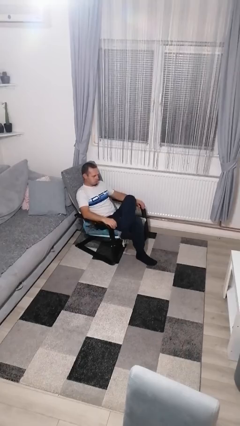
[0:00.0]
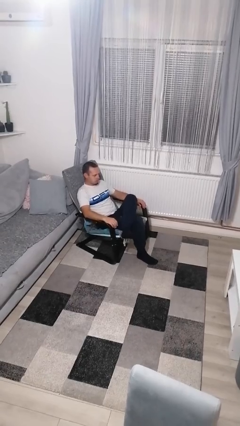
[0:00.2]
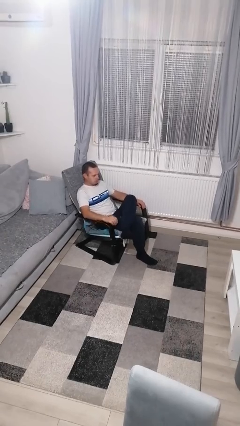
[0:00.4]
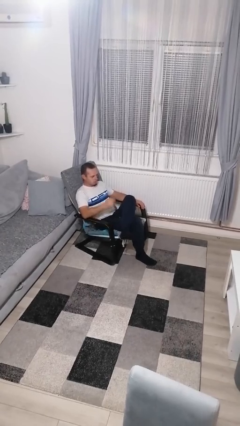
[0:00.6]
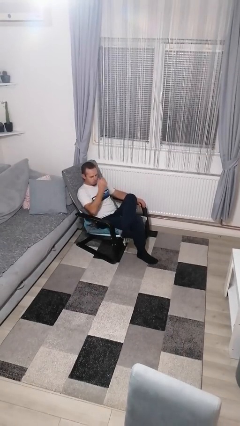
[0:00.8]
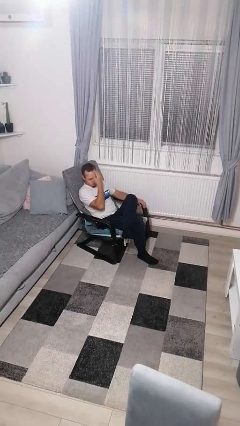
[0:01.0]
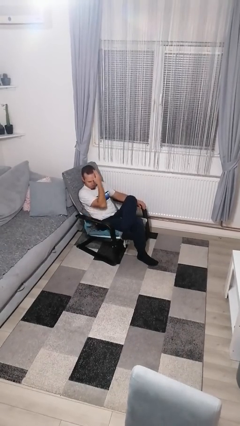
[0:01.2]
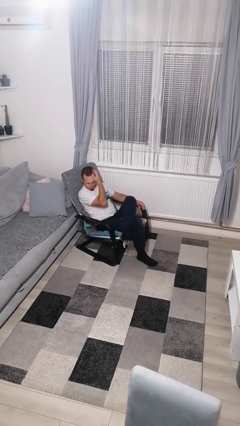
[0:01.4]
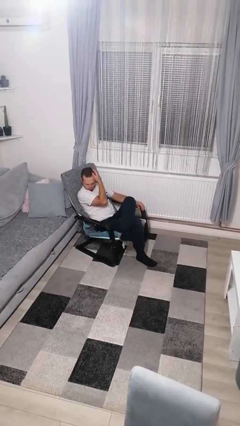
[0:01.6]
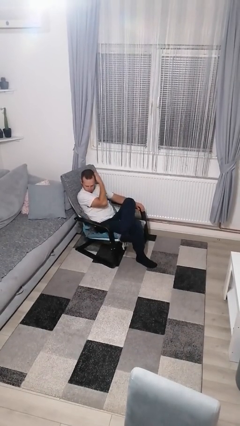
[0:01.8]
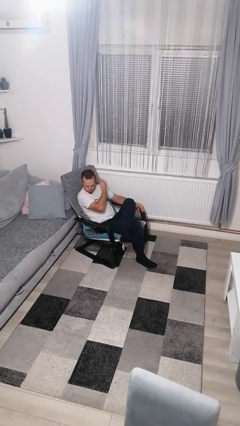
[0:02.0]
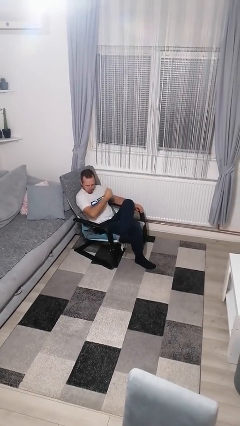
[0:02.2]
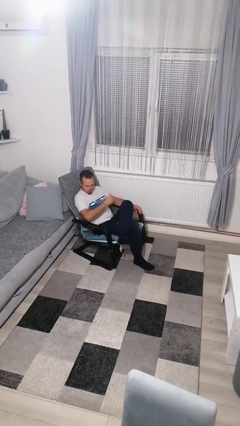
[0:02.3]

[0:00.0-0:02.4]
person strokes hair

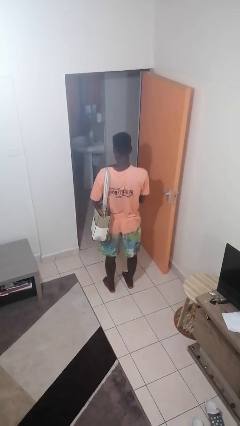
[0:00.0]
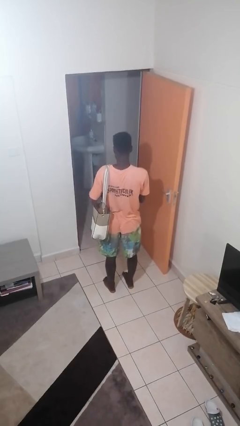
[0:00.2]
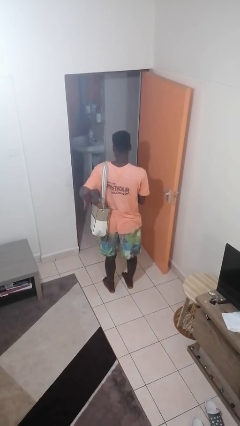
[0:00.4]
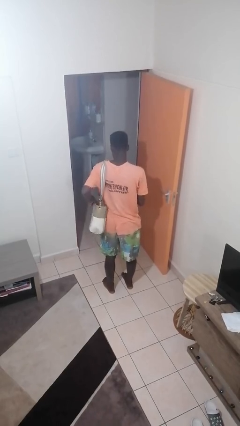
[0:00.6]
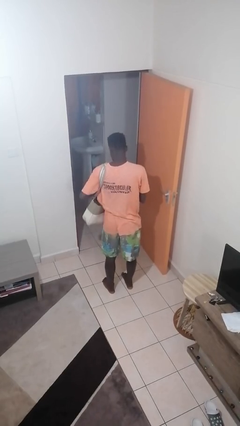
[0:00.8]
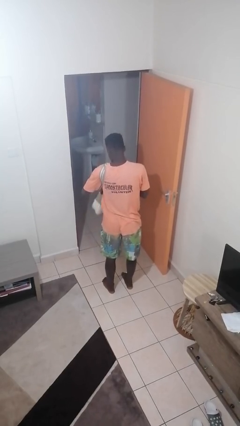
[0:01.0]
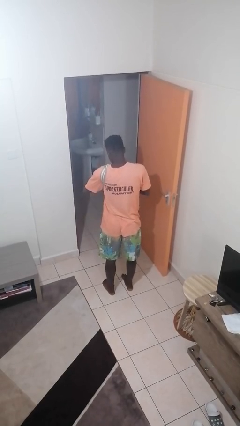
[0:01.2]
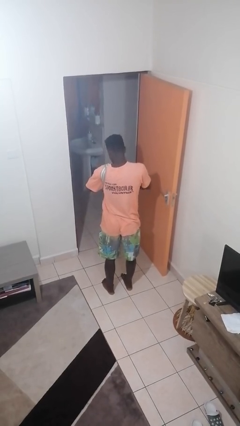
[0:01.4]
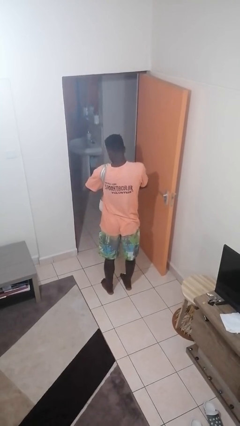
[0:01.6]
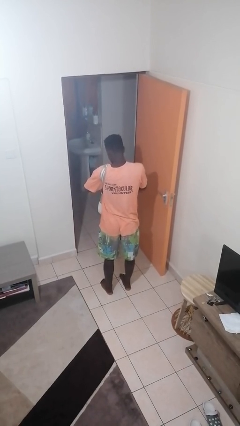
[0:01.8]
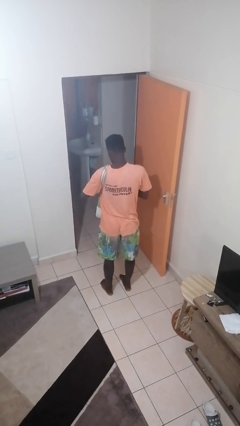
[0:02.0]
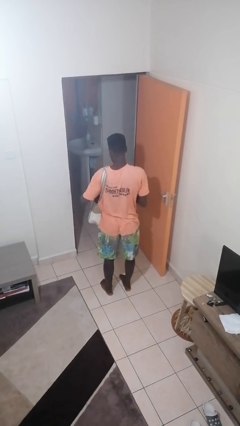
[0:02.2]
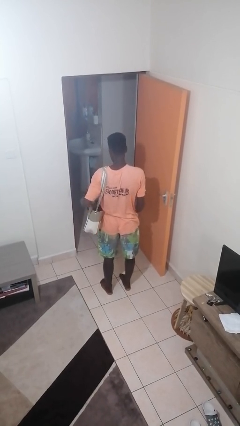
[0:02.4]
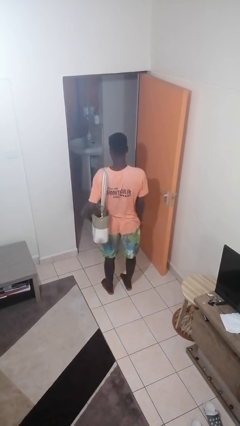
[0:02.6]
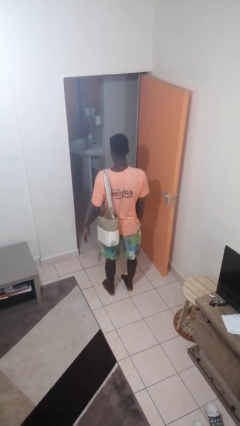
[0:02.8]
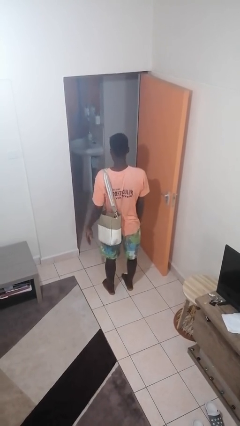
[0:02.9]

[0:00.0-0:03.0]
person puts object into purse

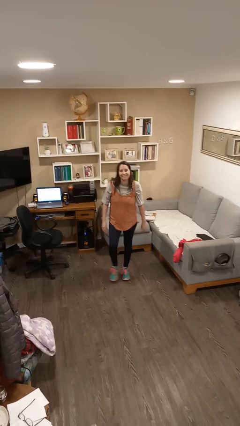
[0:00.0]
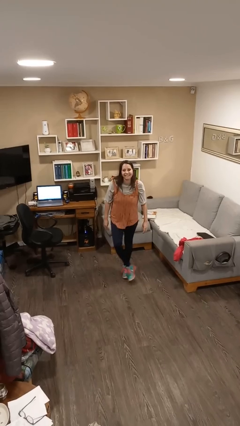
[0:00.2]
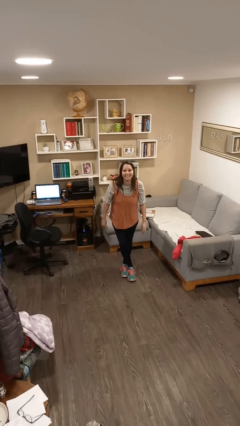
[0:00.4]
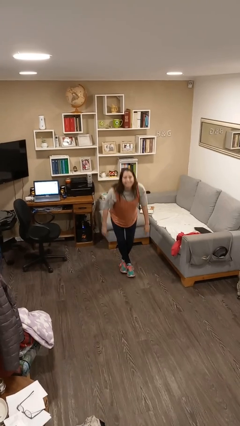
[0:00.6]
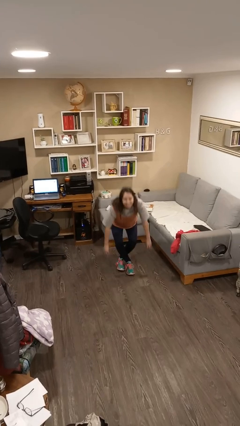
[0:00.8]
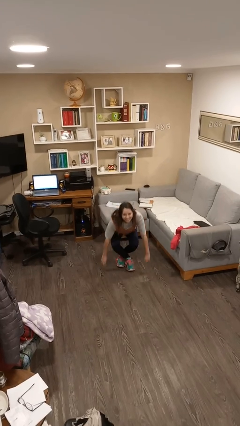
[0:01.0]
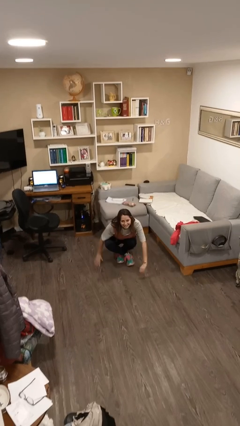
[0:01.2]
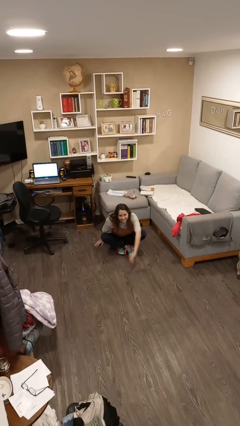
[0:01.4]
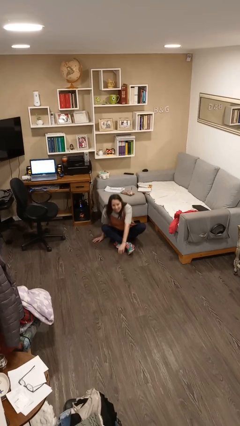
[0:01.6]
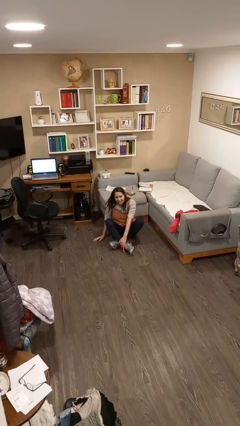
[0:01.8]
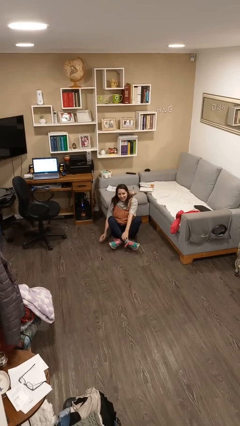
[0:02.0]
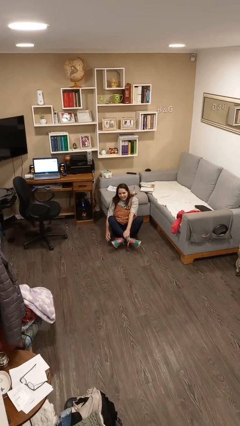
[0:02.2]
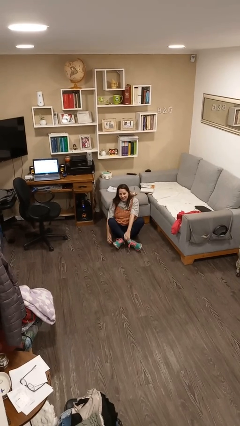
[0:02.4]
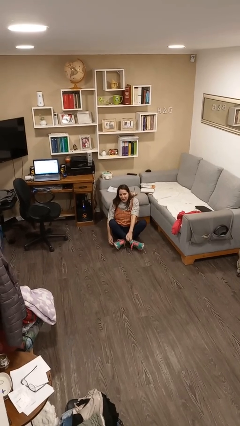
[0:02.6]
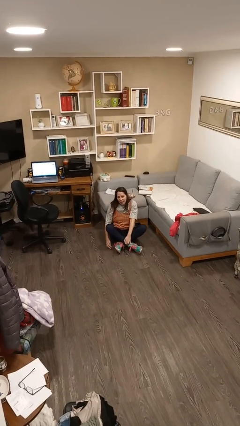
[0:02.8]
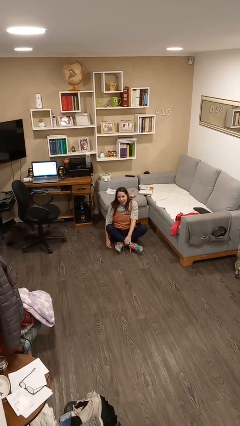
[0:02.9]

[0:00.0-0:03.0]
person sits crisscross

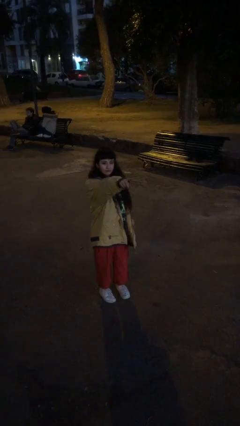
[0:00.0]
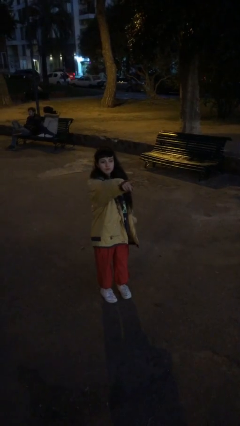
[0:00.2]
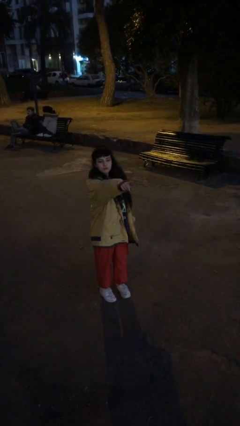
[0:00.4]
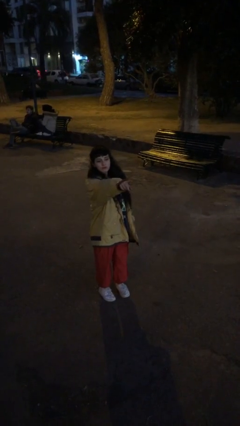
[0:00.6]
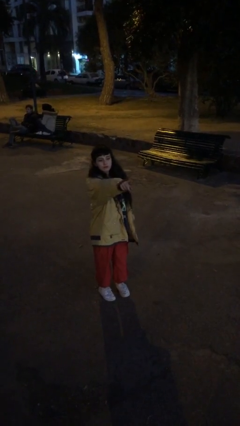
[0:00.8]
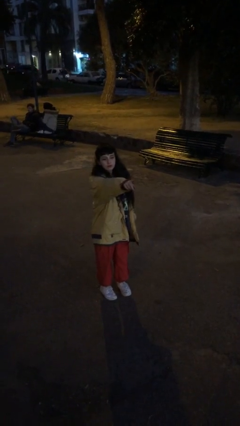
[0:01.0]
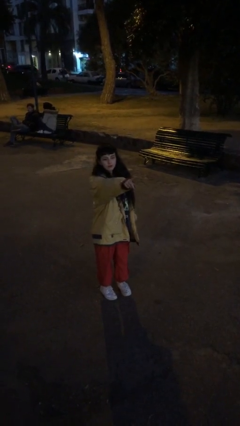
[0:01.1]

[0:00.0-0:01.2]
person points at person

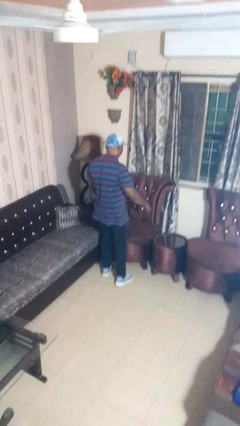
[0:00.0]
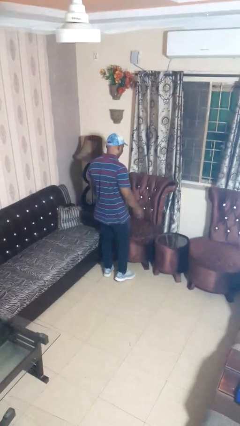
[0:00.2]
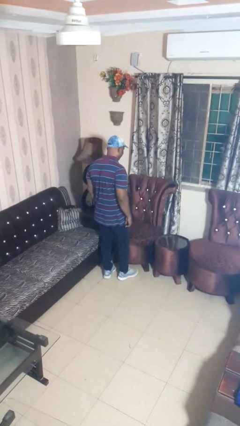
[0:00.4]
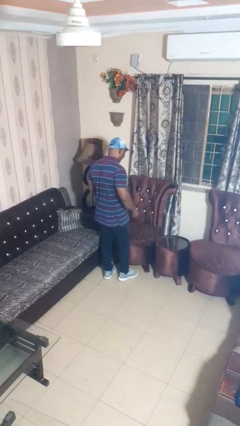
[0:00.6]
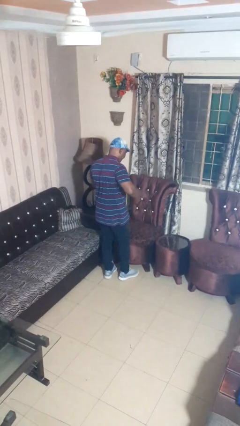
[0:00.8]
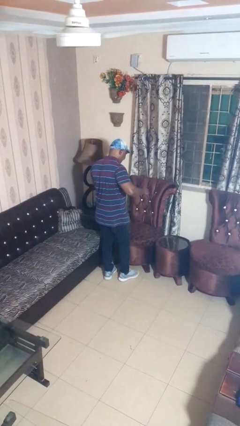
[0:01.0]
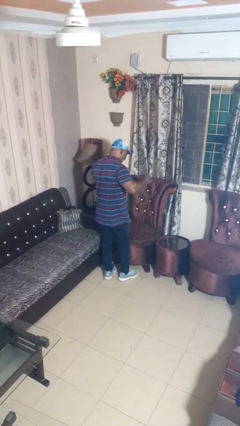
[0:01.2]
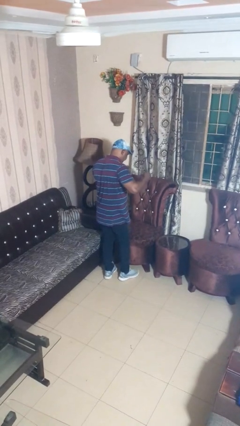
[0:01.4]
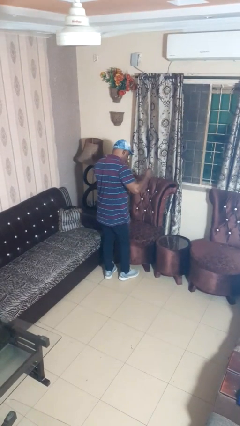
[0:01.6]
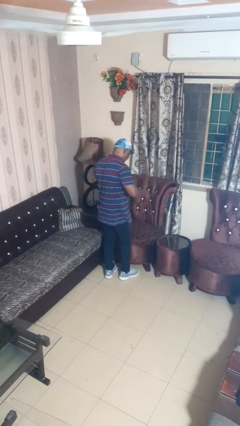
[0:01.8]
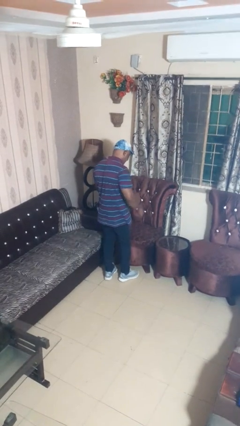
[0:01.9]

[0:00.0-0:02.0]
person snaps fingers

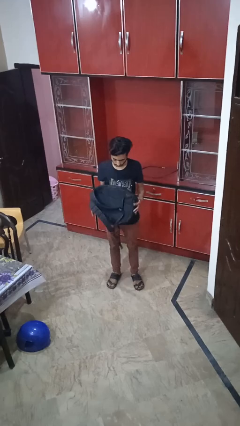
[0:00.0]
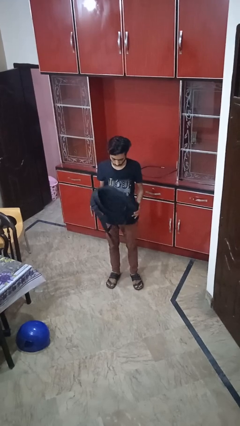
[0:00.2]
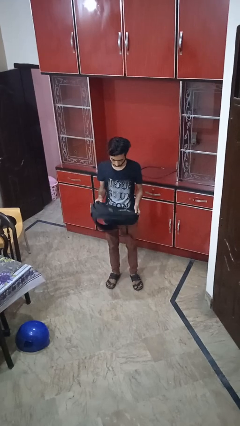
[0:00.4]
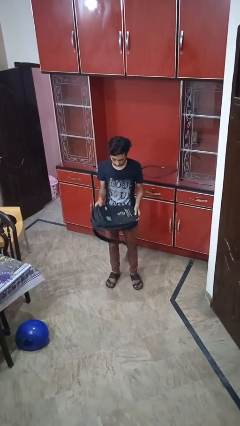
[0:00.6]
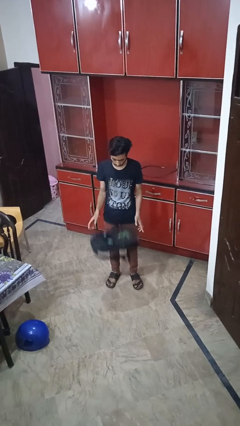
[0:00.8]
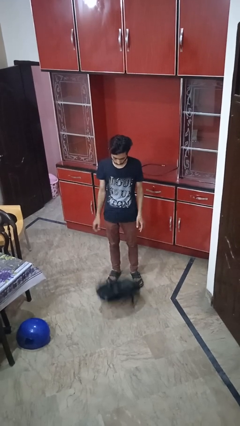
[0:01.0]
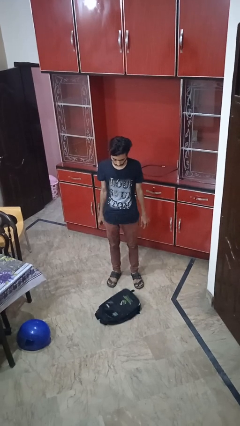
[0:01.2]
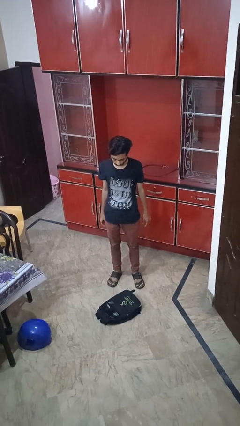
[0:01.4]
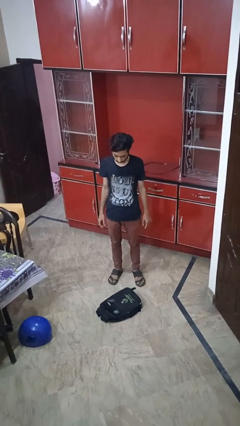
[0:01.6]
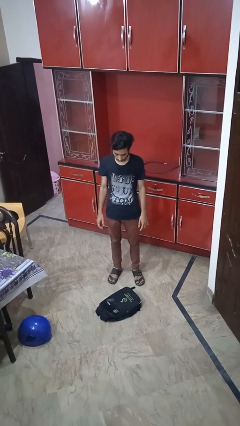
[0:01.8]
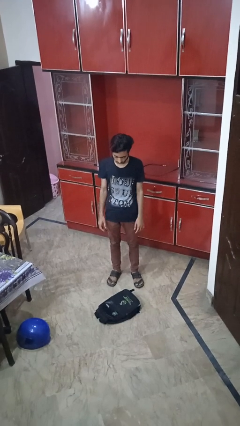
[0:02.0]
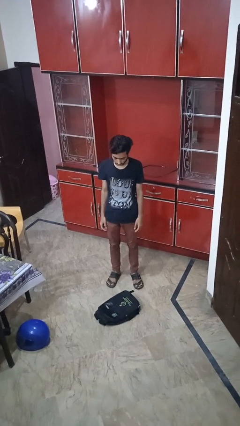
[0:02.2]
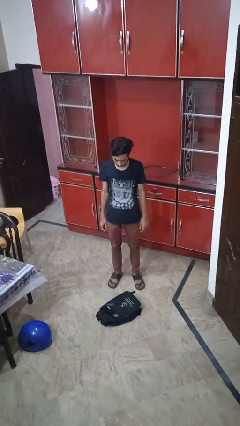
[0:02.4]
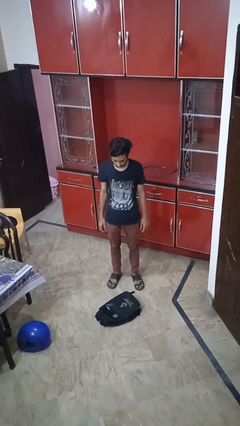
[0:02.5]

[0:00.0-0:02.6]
person drops object

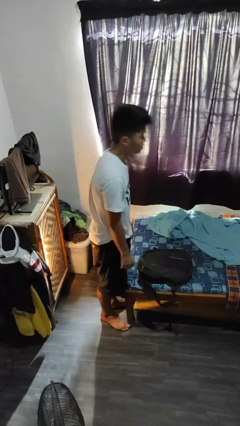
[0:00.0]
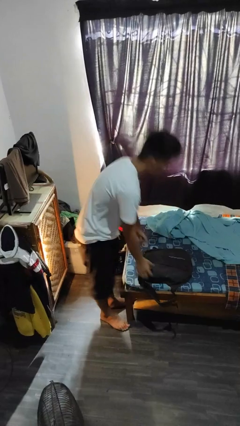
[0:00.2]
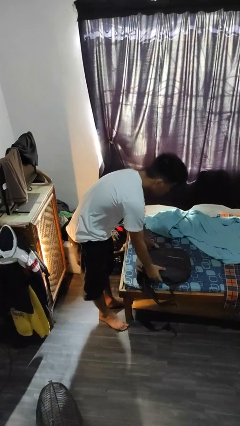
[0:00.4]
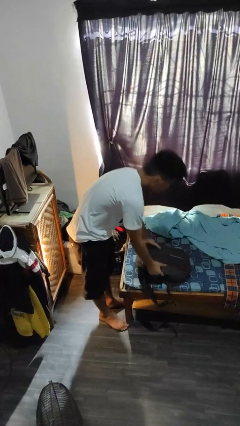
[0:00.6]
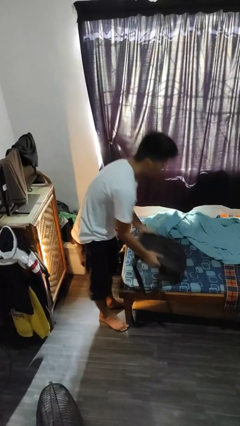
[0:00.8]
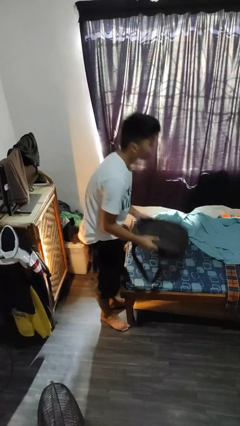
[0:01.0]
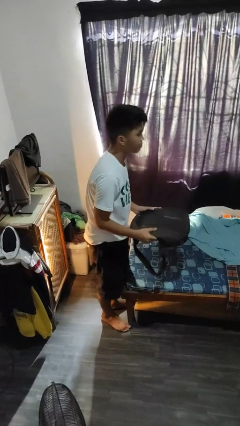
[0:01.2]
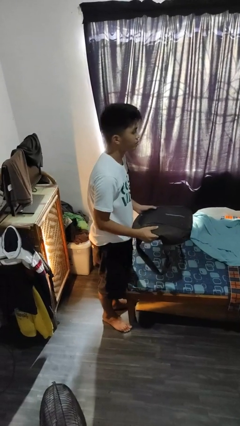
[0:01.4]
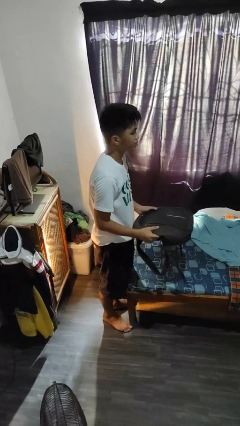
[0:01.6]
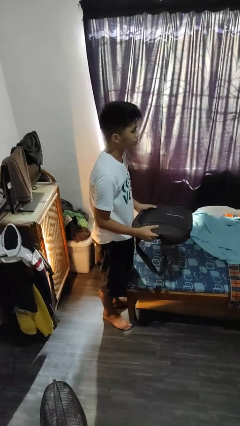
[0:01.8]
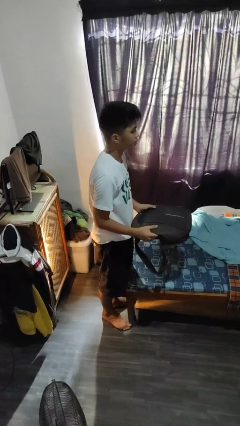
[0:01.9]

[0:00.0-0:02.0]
person picks up object from bed

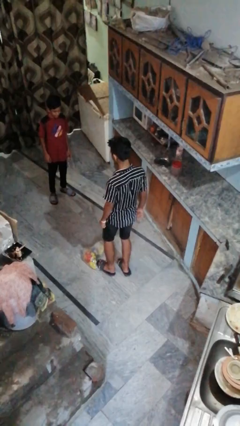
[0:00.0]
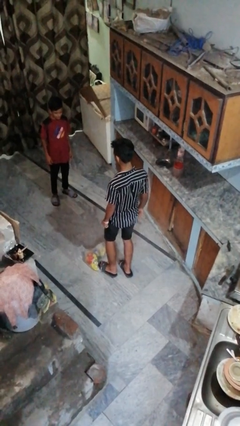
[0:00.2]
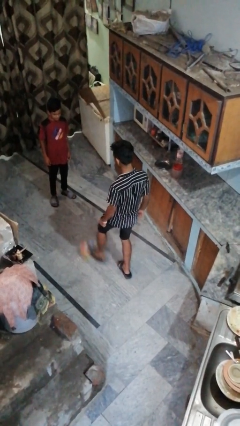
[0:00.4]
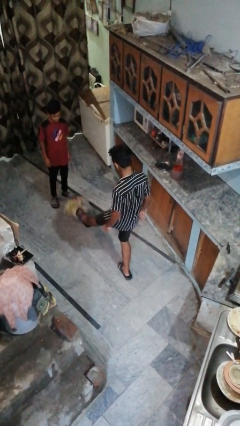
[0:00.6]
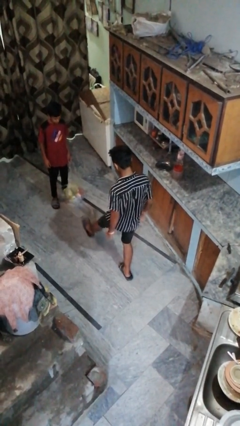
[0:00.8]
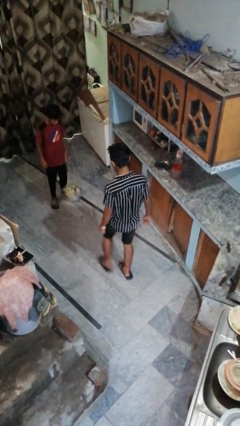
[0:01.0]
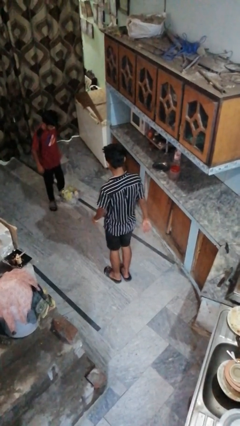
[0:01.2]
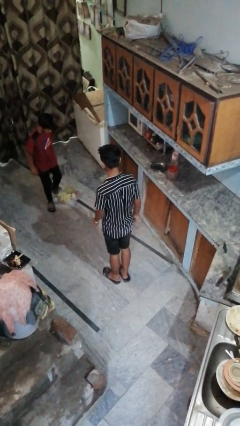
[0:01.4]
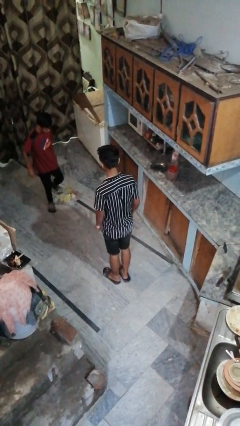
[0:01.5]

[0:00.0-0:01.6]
person kicks object to person
